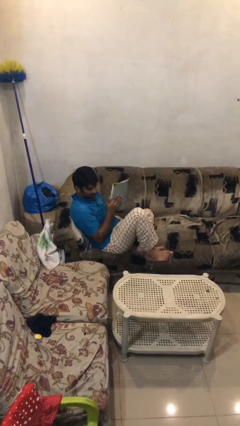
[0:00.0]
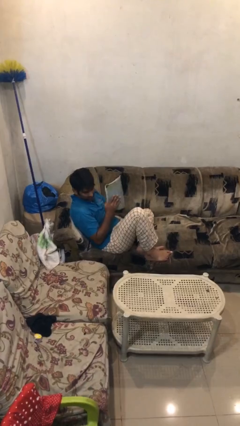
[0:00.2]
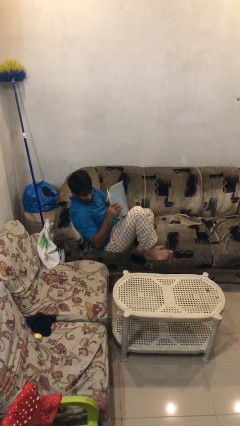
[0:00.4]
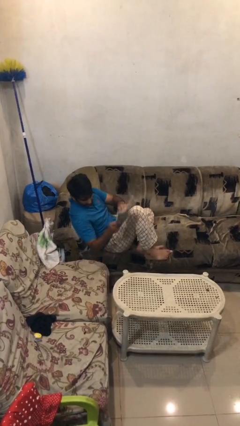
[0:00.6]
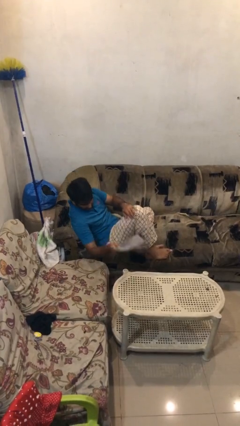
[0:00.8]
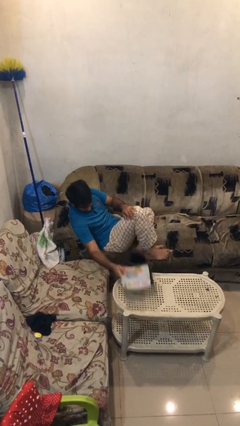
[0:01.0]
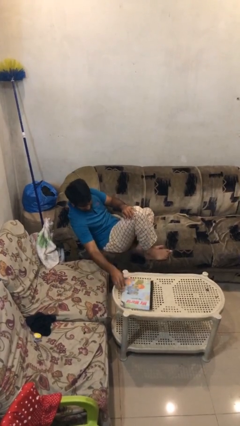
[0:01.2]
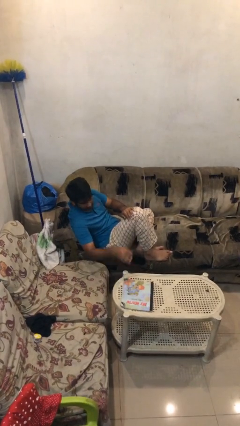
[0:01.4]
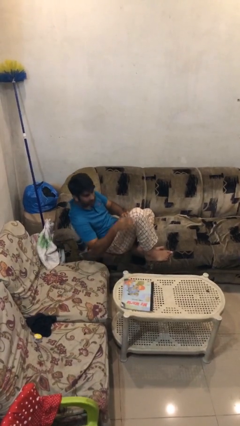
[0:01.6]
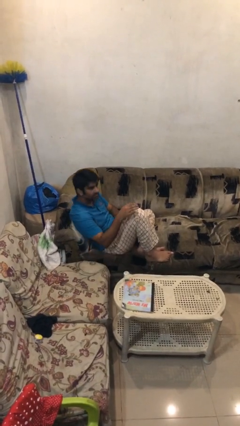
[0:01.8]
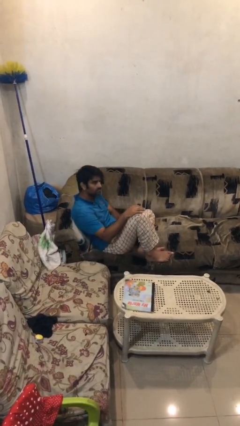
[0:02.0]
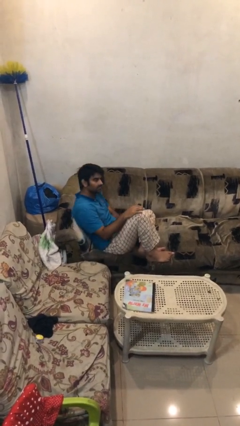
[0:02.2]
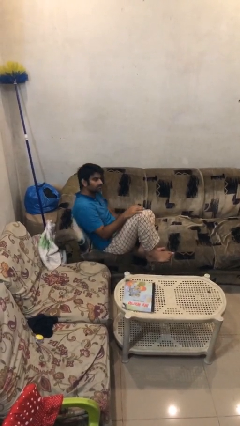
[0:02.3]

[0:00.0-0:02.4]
person puts down object on table

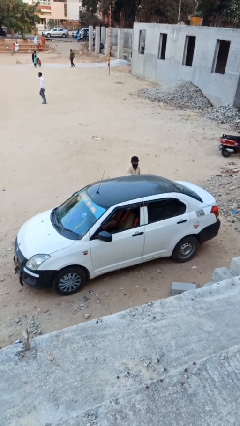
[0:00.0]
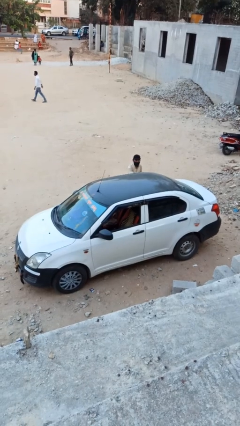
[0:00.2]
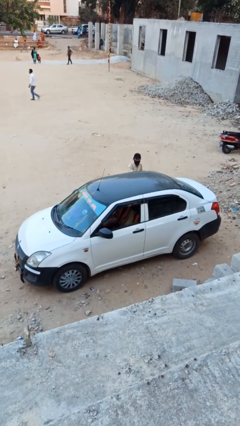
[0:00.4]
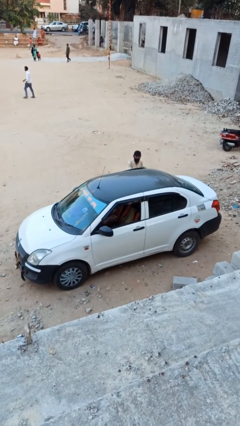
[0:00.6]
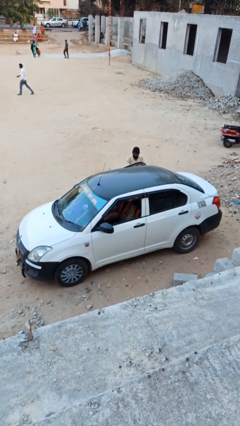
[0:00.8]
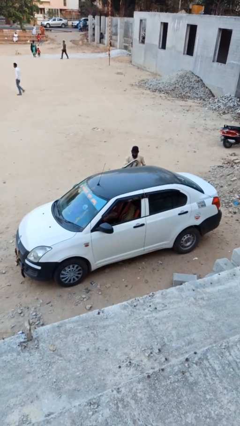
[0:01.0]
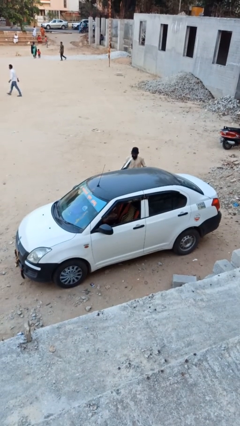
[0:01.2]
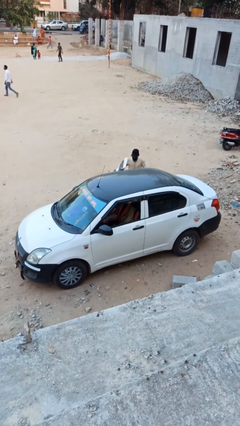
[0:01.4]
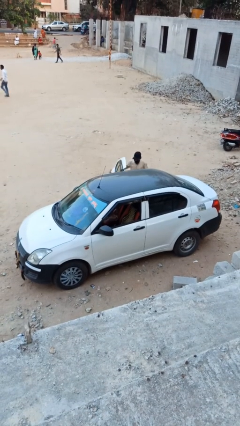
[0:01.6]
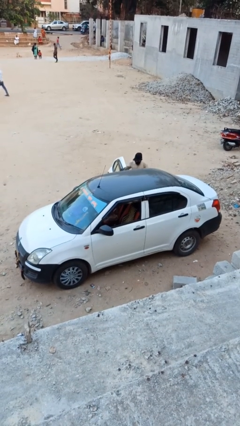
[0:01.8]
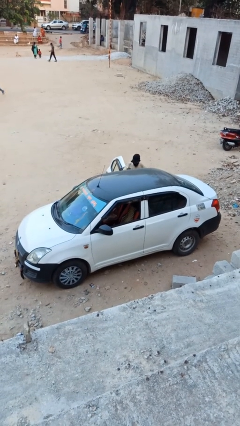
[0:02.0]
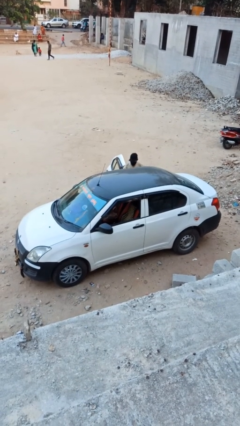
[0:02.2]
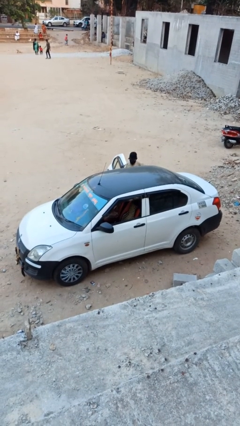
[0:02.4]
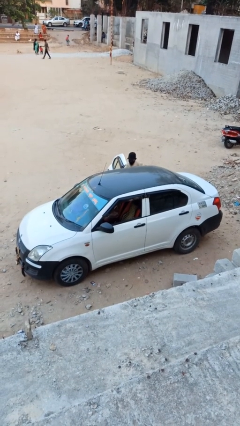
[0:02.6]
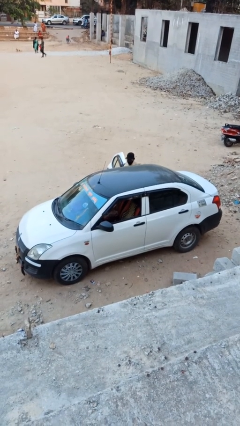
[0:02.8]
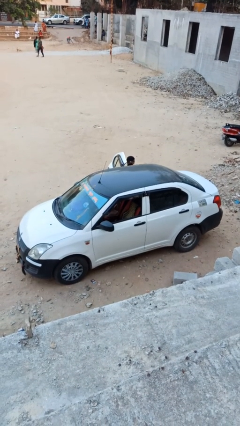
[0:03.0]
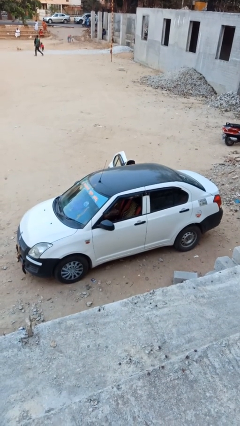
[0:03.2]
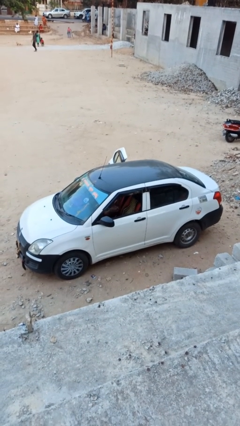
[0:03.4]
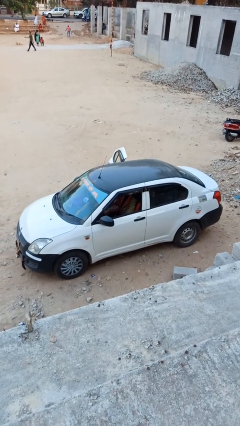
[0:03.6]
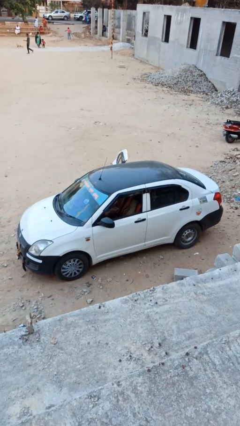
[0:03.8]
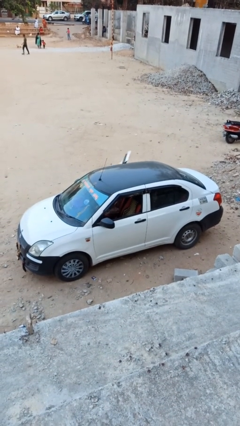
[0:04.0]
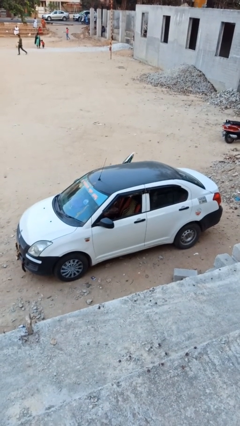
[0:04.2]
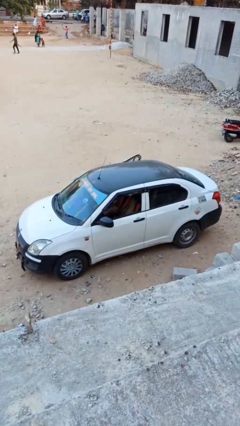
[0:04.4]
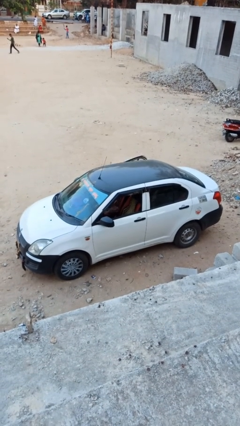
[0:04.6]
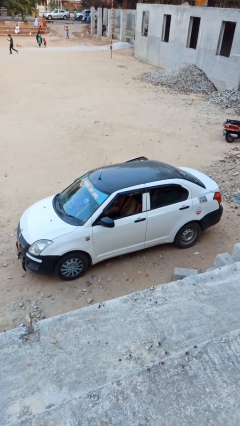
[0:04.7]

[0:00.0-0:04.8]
car picks up person

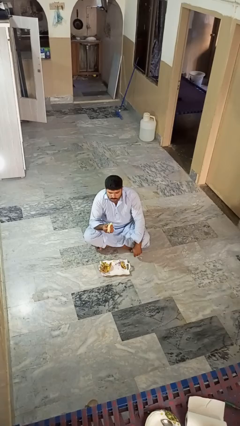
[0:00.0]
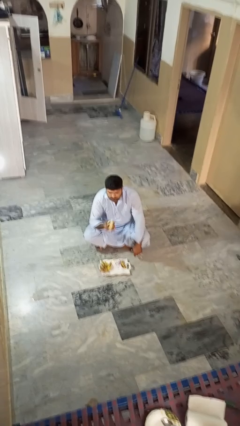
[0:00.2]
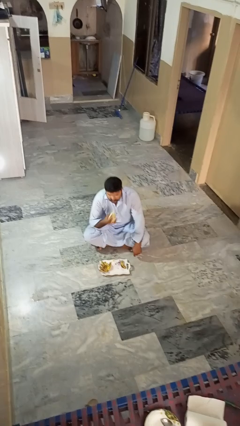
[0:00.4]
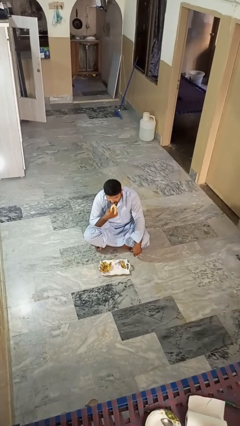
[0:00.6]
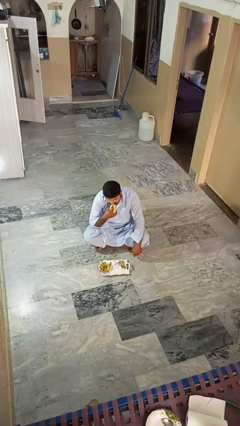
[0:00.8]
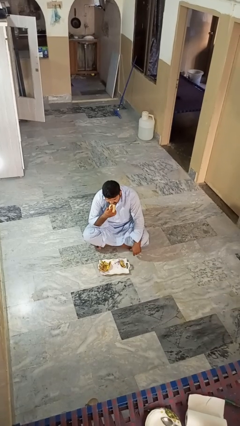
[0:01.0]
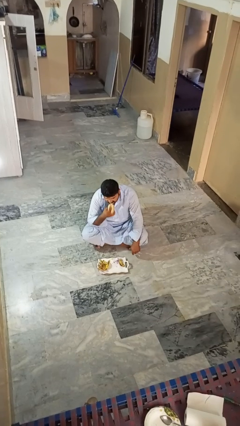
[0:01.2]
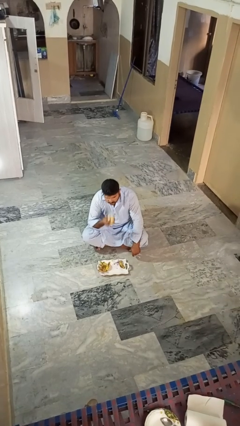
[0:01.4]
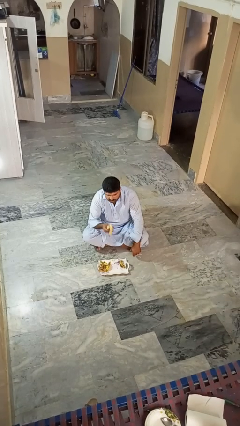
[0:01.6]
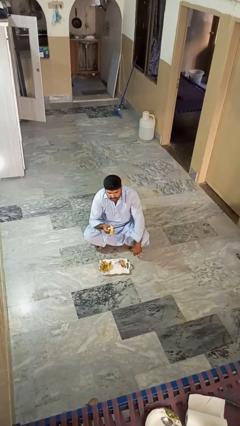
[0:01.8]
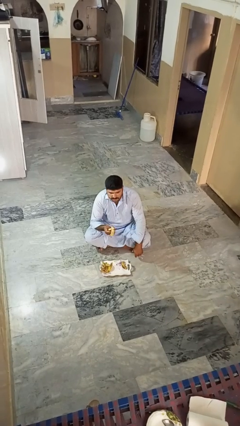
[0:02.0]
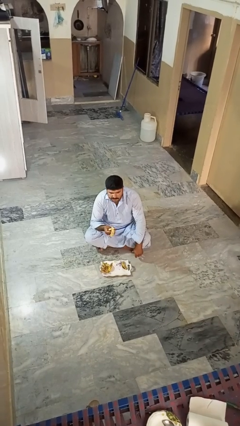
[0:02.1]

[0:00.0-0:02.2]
person eats banana

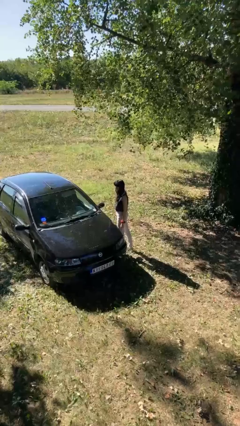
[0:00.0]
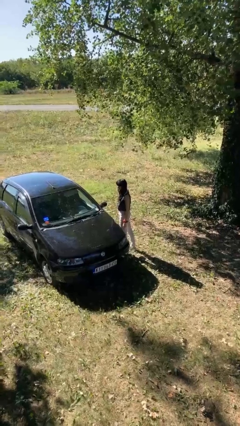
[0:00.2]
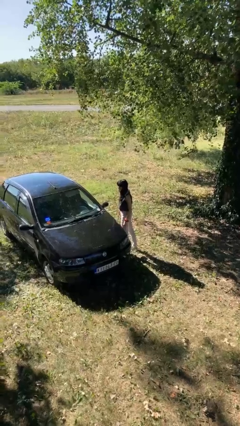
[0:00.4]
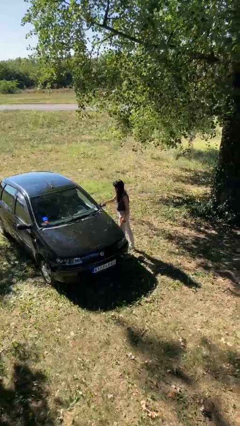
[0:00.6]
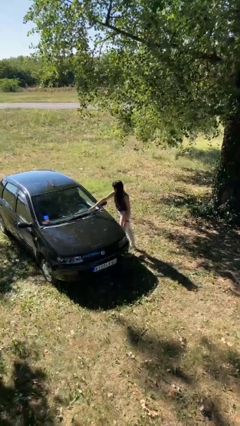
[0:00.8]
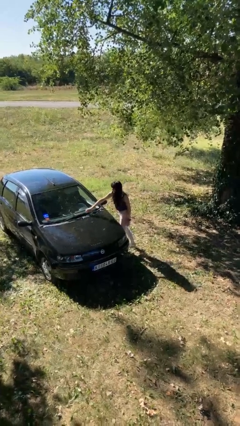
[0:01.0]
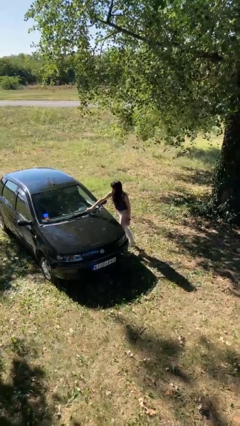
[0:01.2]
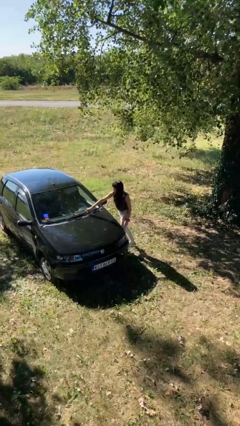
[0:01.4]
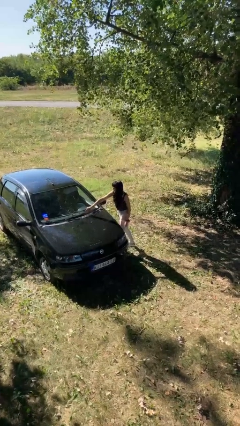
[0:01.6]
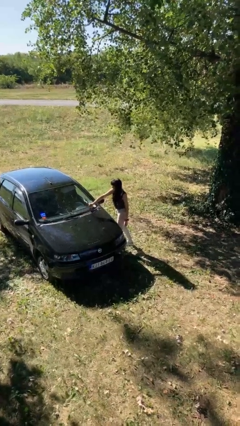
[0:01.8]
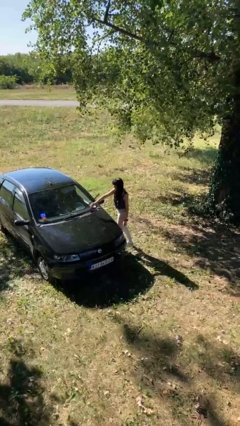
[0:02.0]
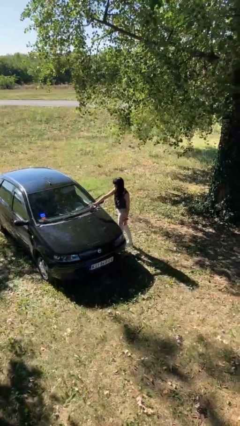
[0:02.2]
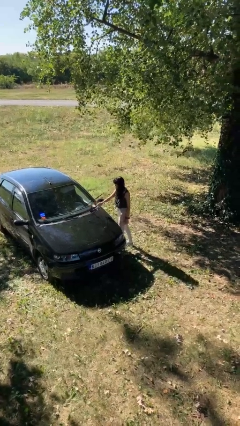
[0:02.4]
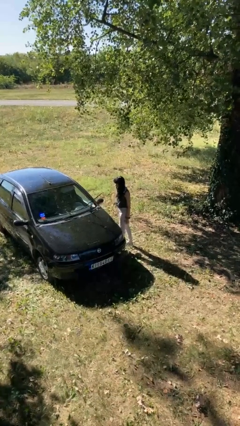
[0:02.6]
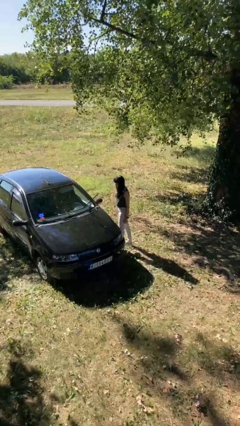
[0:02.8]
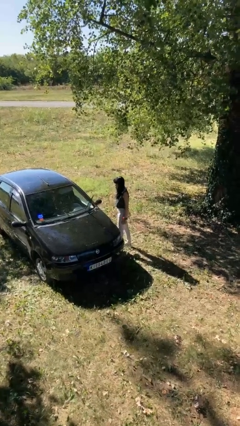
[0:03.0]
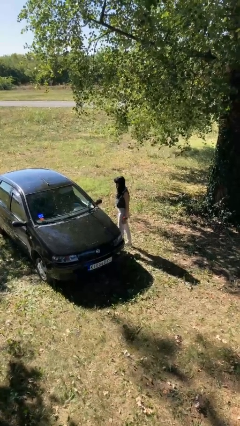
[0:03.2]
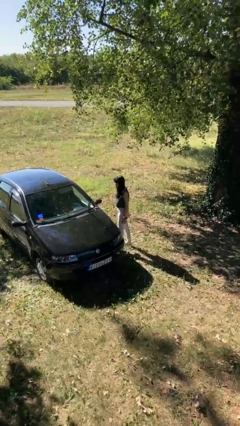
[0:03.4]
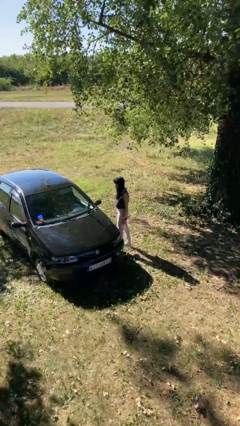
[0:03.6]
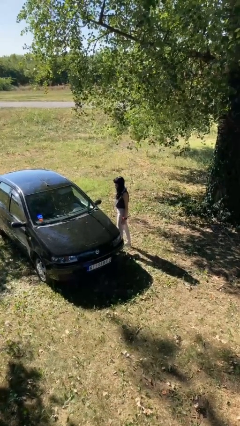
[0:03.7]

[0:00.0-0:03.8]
person flips up car wipers

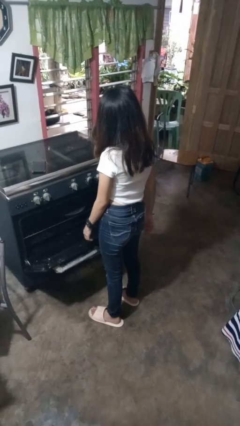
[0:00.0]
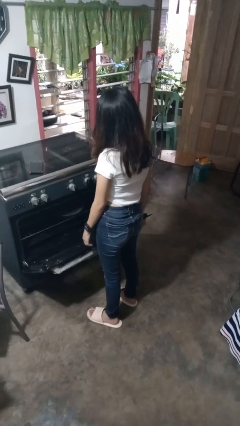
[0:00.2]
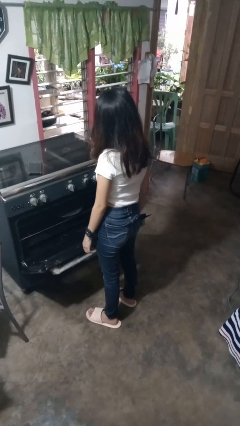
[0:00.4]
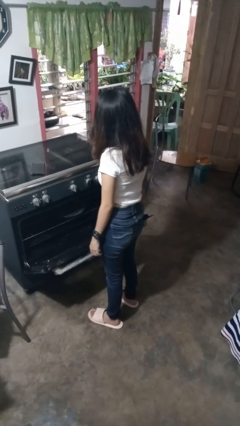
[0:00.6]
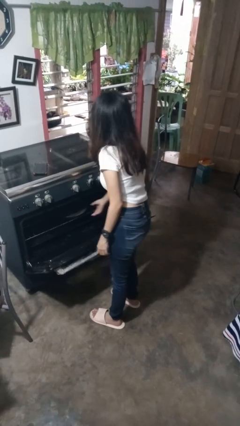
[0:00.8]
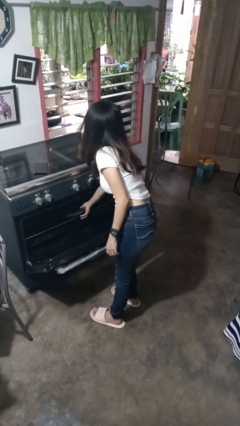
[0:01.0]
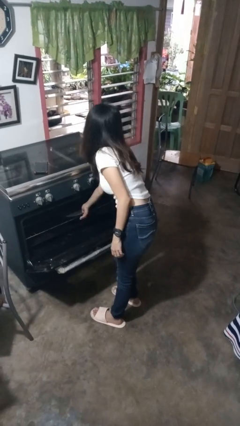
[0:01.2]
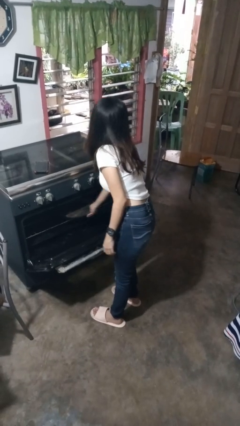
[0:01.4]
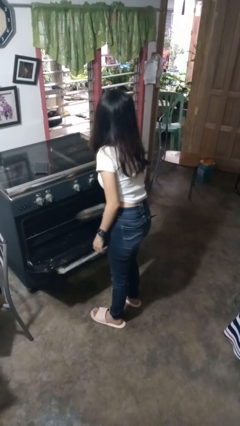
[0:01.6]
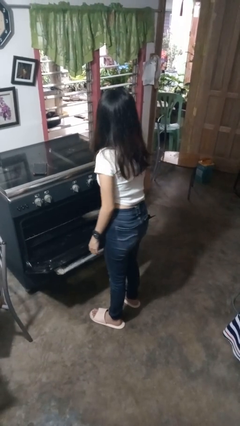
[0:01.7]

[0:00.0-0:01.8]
person takes object from oven

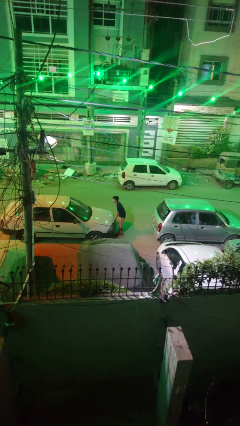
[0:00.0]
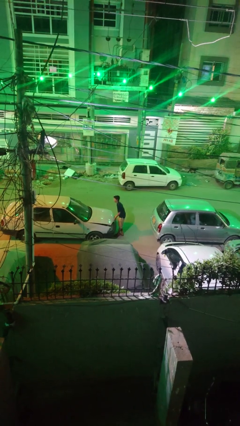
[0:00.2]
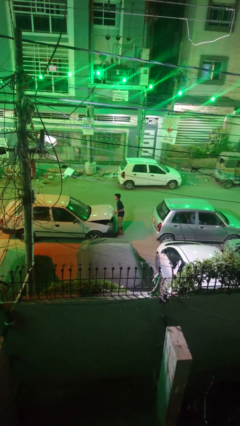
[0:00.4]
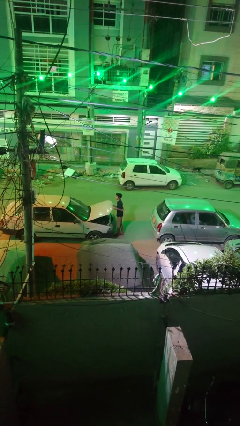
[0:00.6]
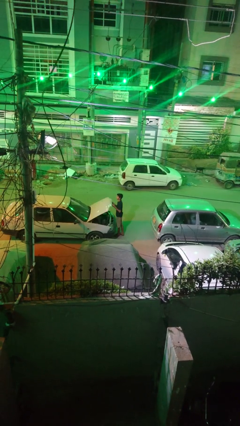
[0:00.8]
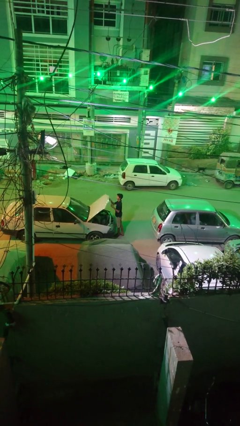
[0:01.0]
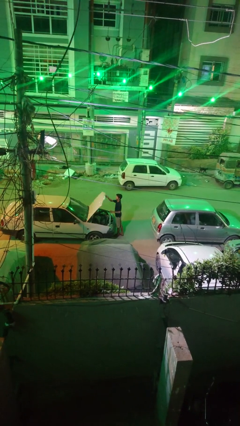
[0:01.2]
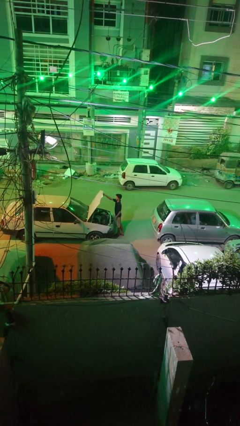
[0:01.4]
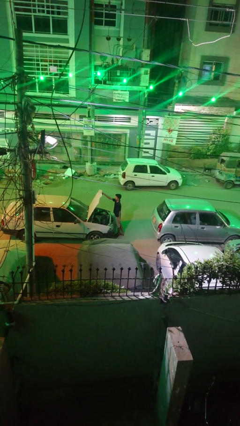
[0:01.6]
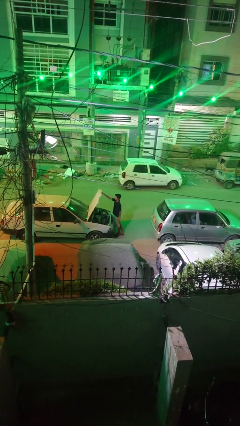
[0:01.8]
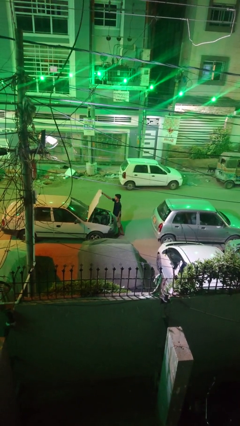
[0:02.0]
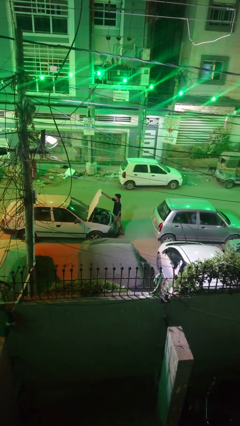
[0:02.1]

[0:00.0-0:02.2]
person opens car hood

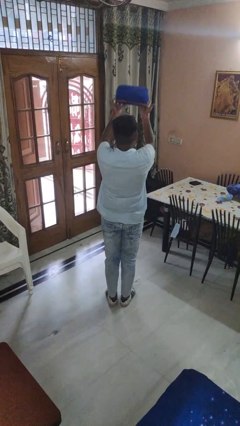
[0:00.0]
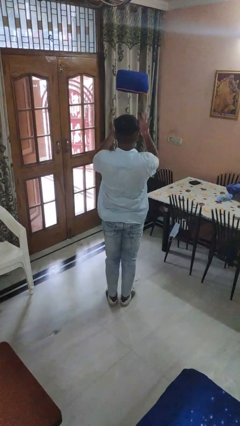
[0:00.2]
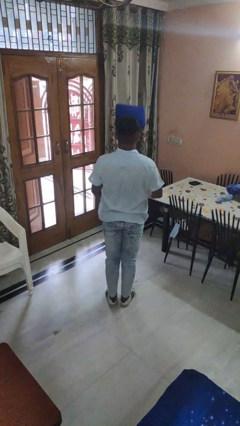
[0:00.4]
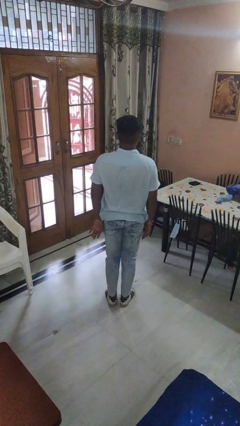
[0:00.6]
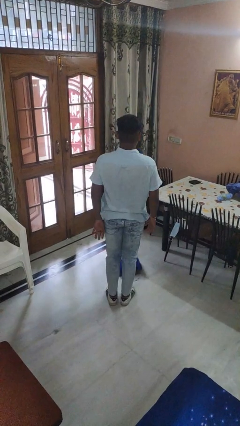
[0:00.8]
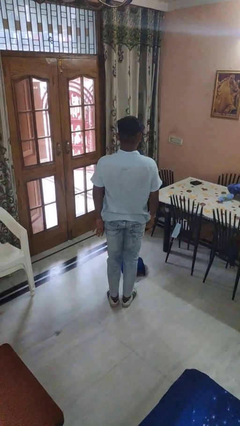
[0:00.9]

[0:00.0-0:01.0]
person throws object into air
